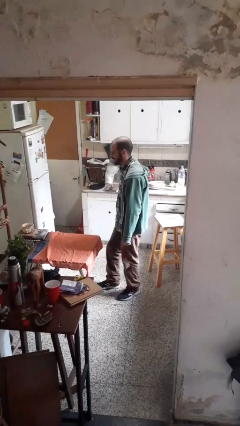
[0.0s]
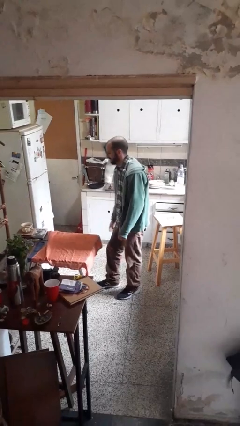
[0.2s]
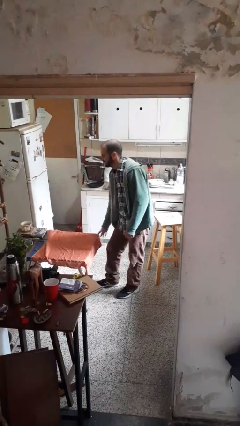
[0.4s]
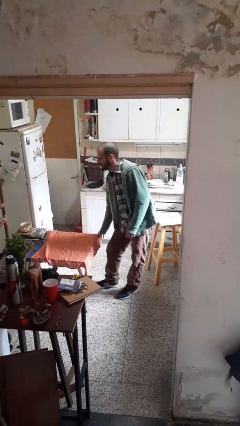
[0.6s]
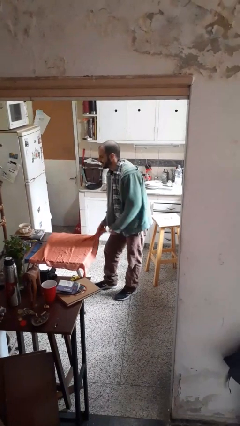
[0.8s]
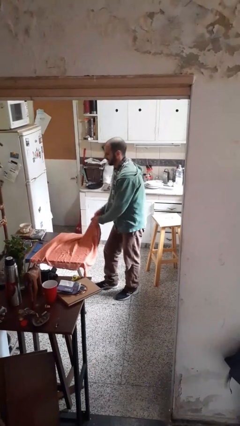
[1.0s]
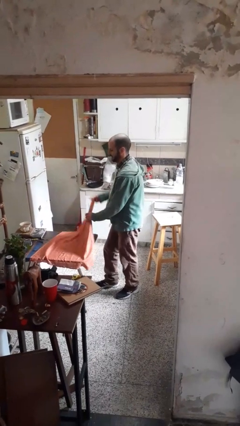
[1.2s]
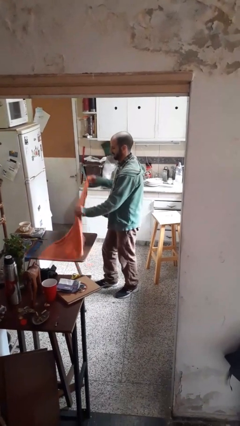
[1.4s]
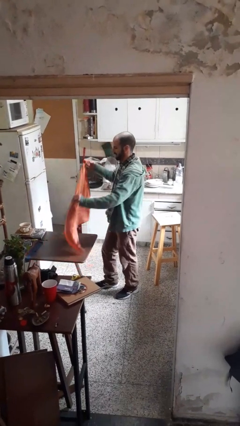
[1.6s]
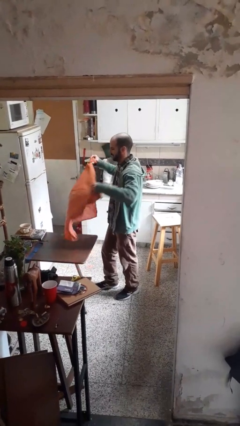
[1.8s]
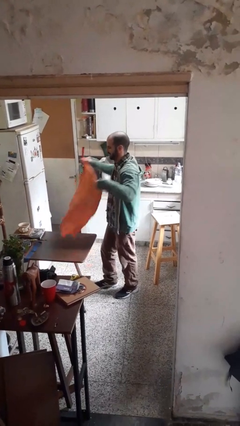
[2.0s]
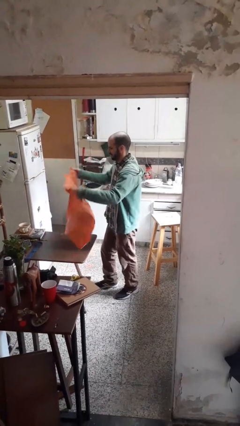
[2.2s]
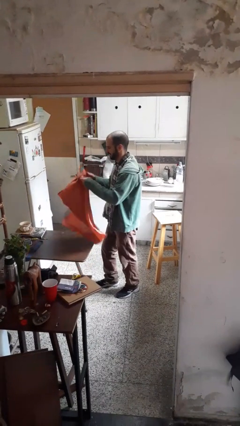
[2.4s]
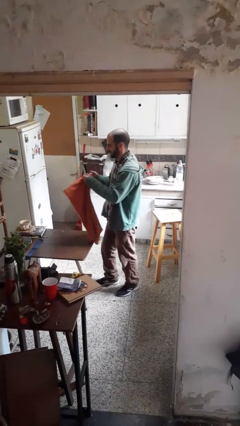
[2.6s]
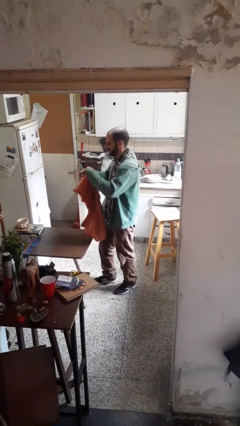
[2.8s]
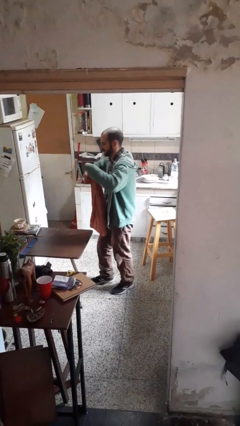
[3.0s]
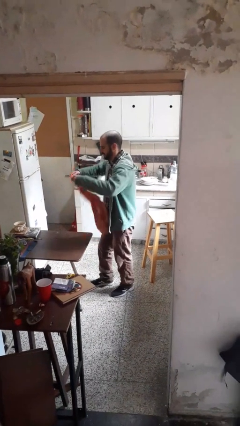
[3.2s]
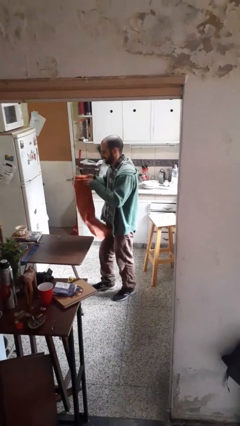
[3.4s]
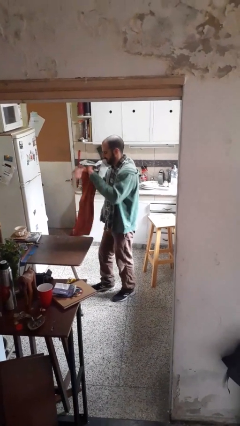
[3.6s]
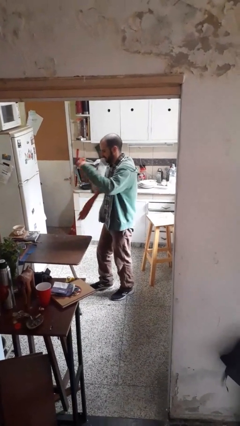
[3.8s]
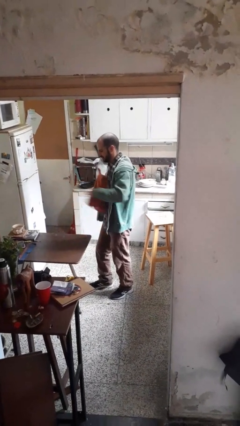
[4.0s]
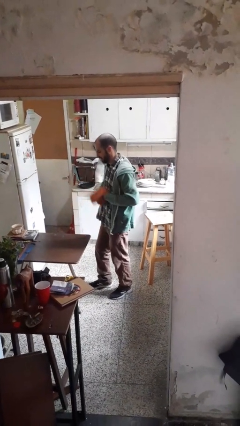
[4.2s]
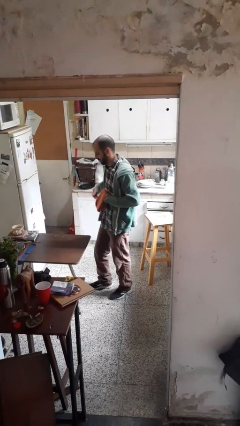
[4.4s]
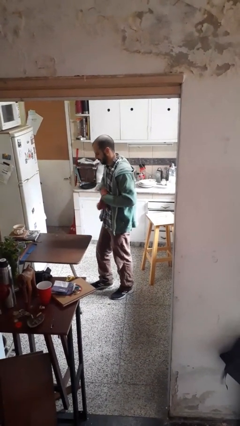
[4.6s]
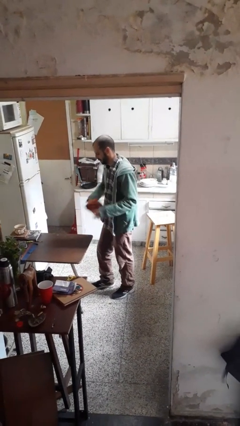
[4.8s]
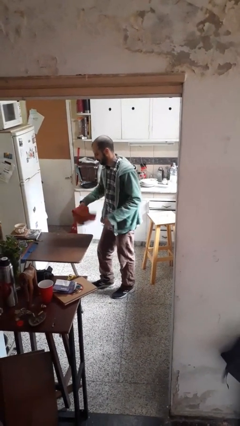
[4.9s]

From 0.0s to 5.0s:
person folds tablecloth

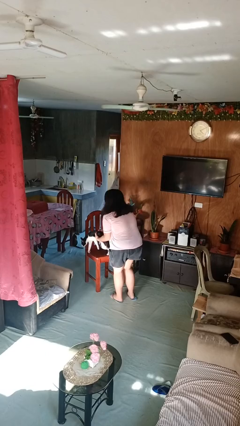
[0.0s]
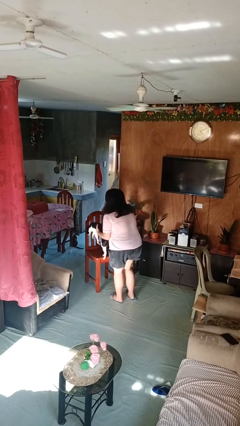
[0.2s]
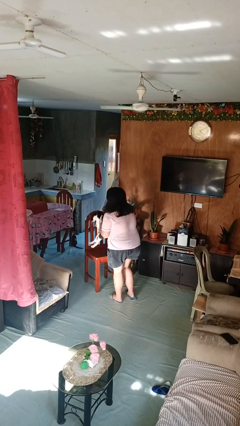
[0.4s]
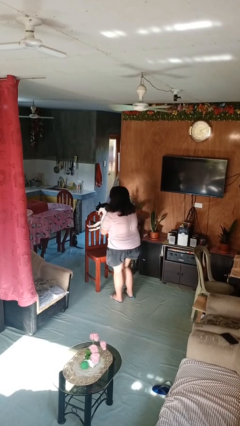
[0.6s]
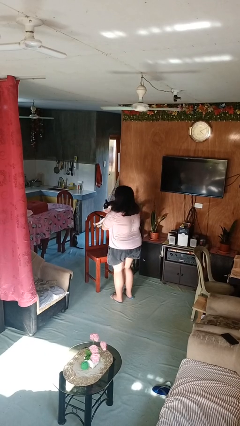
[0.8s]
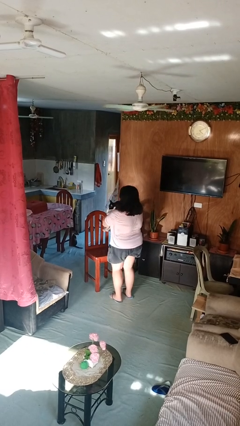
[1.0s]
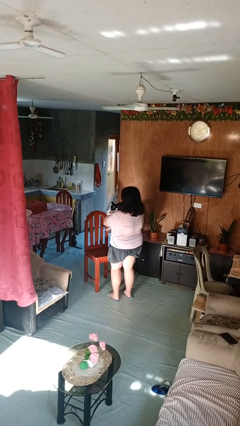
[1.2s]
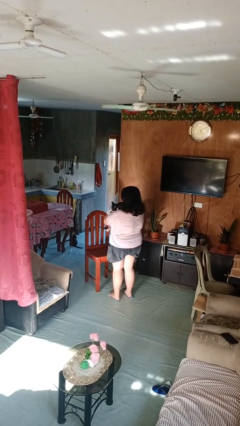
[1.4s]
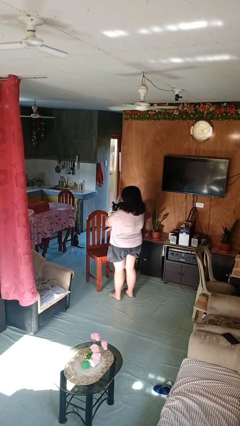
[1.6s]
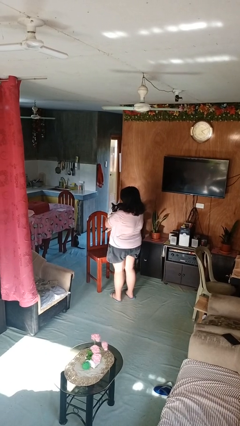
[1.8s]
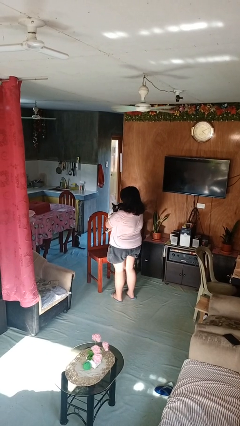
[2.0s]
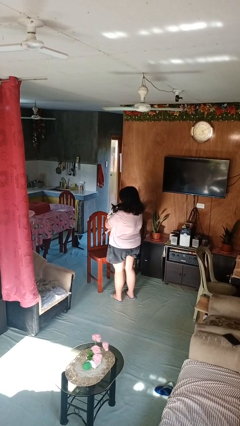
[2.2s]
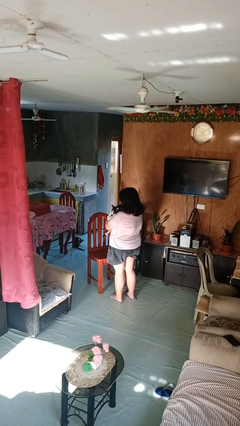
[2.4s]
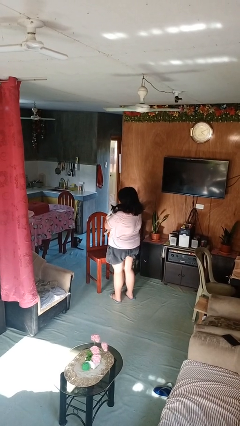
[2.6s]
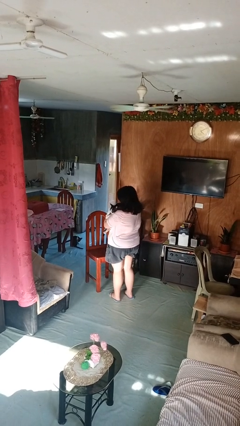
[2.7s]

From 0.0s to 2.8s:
person hugs cat

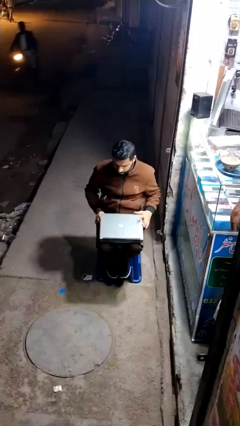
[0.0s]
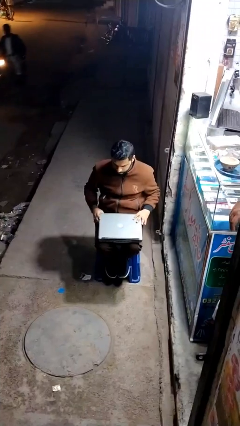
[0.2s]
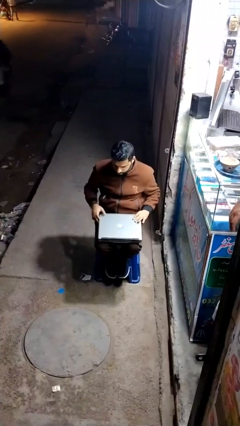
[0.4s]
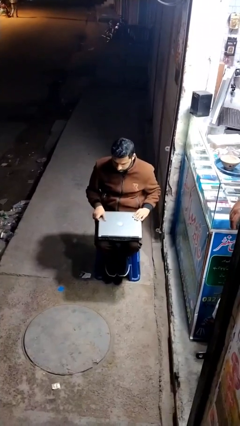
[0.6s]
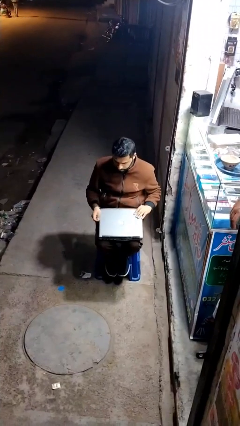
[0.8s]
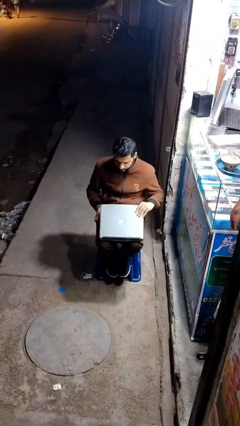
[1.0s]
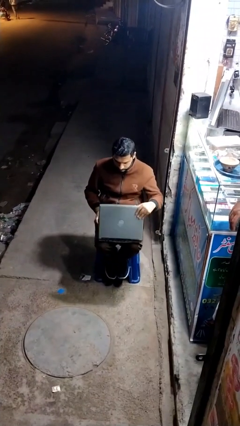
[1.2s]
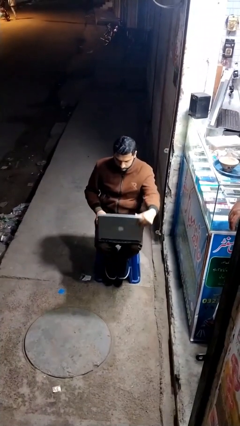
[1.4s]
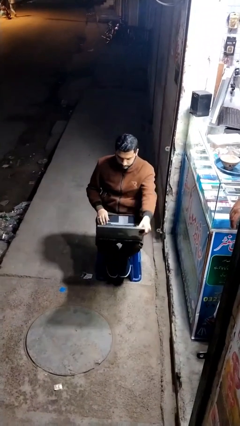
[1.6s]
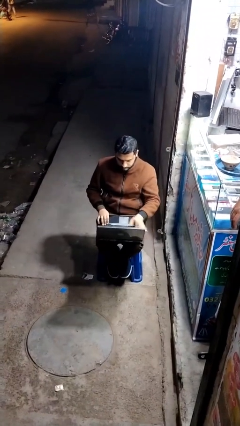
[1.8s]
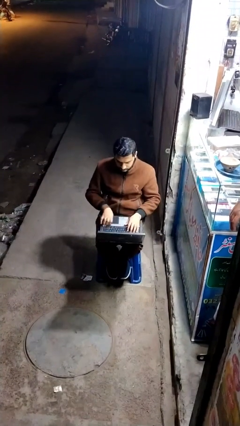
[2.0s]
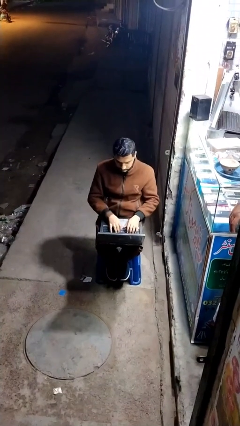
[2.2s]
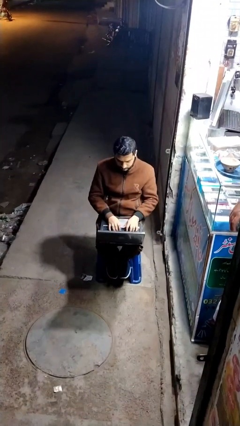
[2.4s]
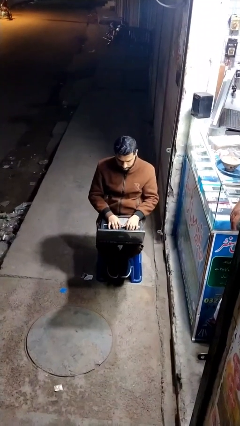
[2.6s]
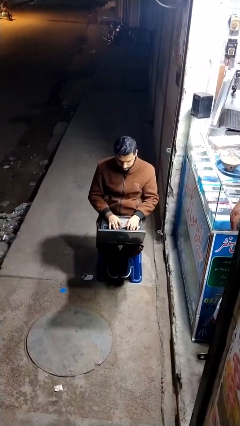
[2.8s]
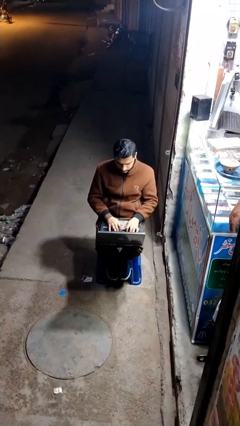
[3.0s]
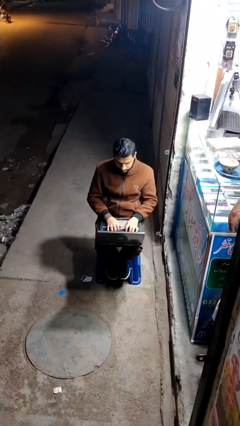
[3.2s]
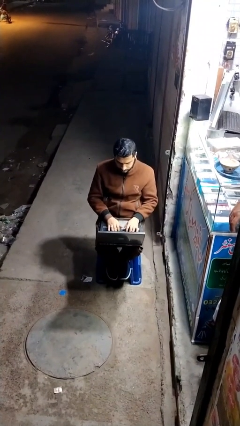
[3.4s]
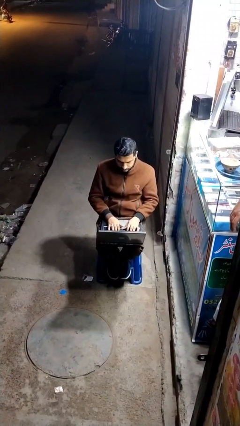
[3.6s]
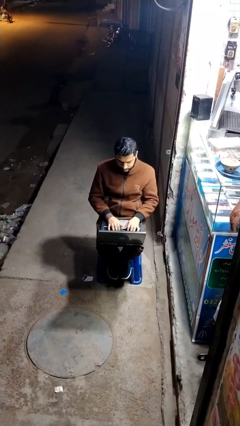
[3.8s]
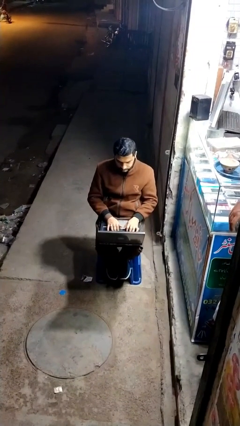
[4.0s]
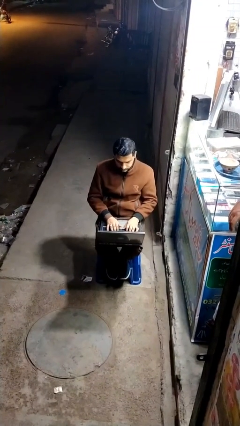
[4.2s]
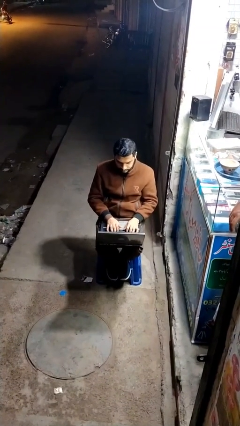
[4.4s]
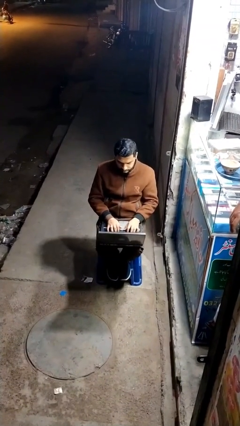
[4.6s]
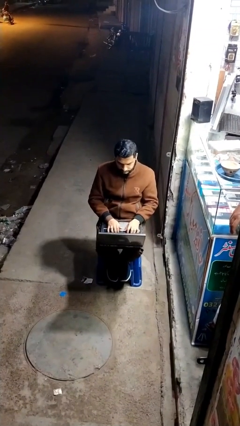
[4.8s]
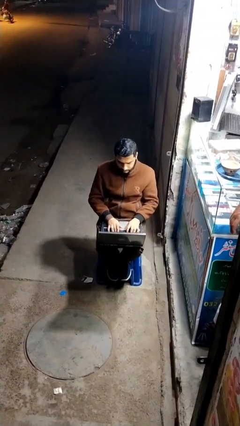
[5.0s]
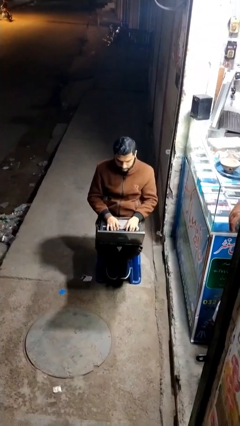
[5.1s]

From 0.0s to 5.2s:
person interacts with laptop

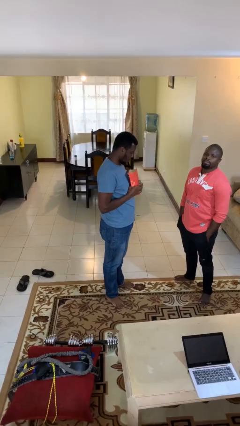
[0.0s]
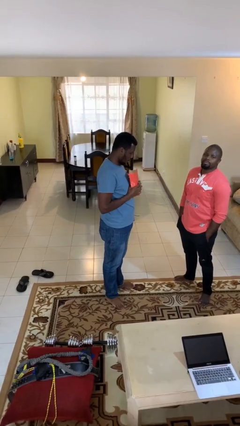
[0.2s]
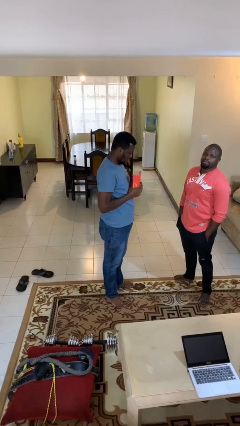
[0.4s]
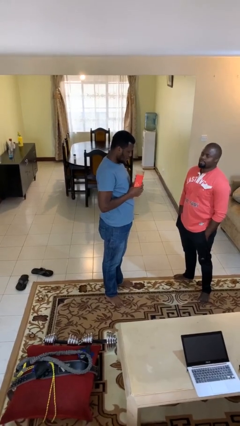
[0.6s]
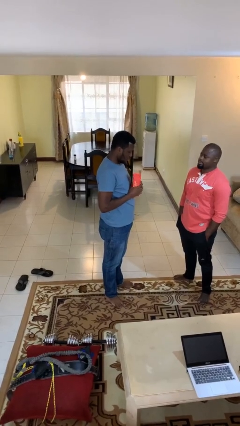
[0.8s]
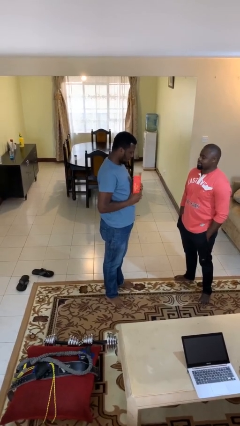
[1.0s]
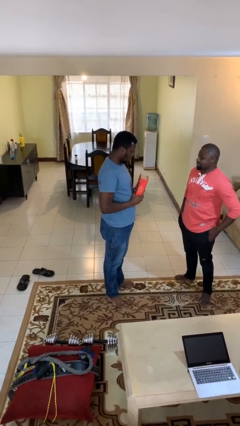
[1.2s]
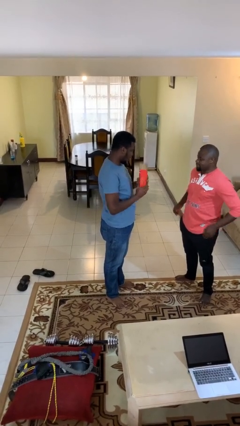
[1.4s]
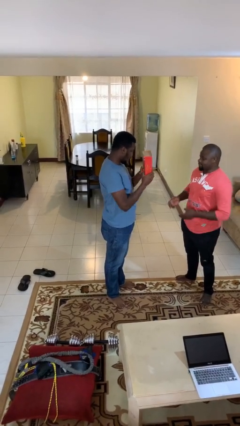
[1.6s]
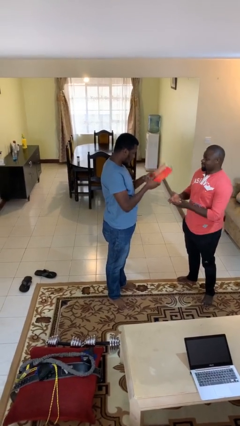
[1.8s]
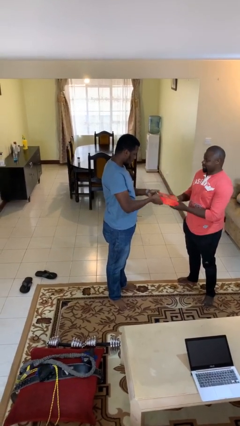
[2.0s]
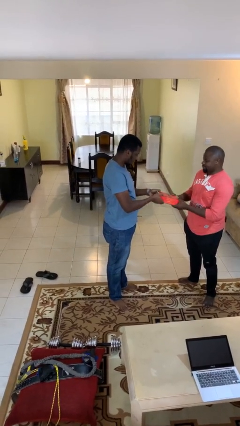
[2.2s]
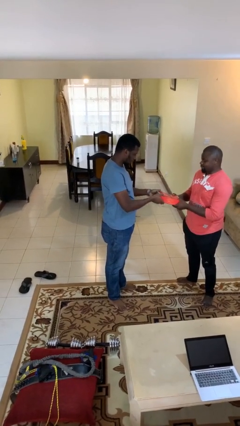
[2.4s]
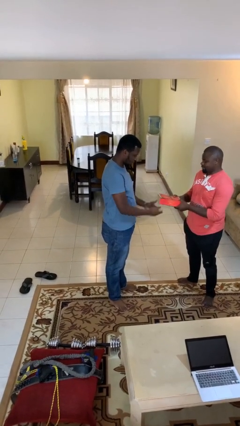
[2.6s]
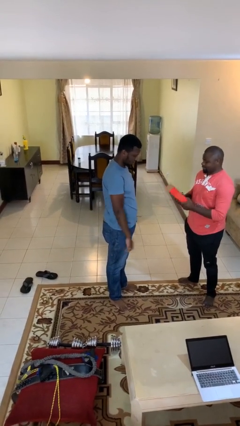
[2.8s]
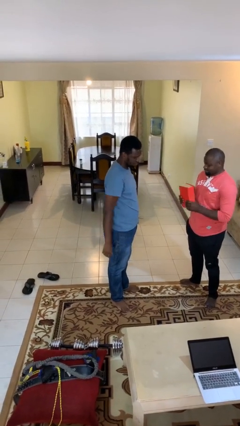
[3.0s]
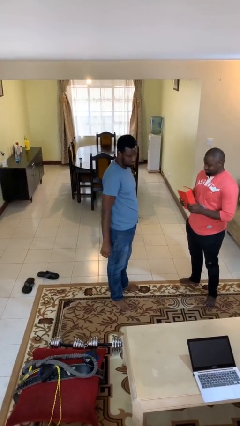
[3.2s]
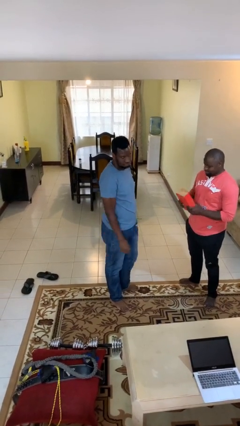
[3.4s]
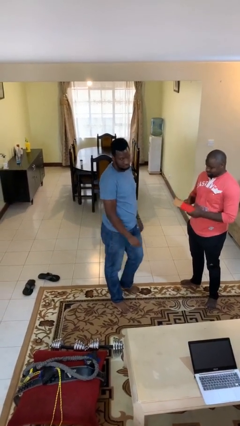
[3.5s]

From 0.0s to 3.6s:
person transfers object to person

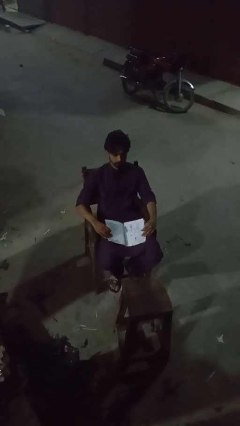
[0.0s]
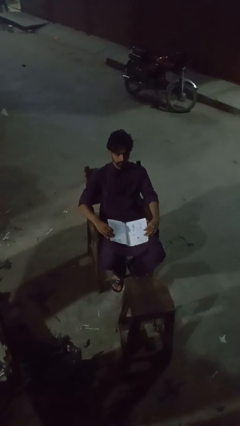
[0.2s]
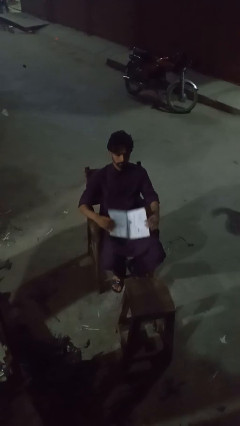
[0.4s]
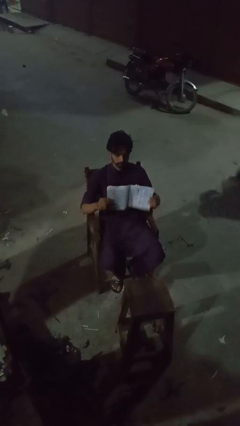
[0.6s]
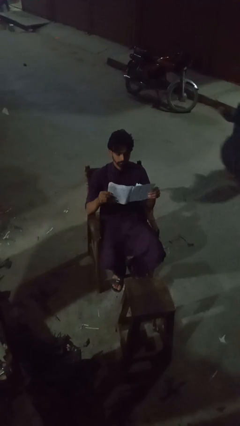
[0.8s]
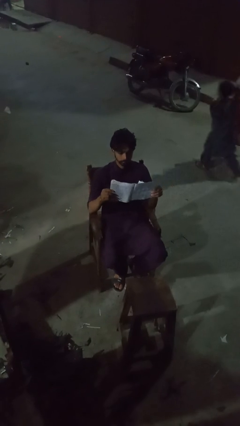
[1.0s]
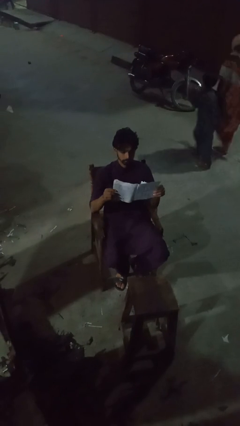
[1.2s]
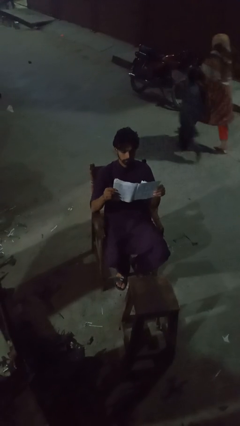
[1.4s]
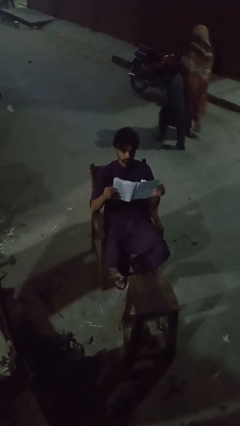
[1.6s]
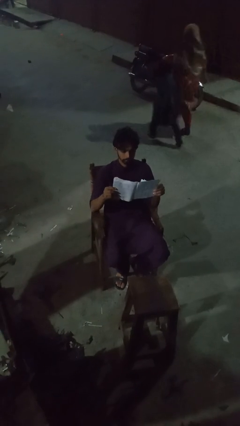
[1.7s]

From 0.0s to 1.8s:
person reads magazine
